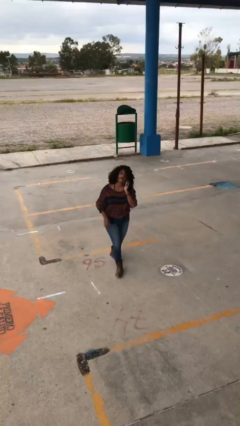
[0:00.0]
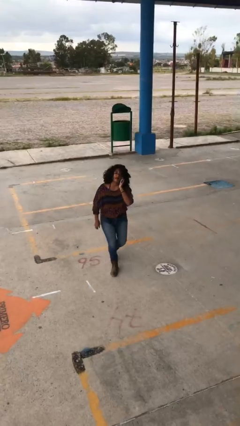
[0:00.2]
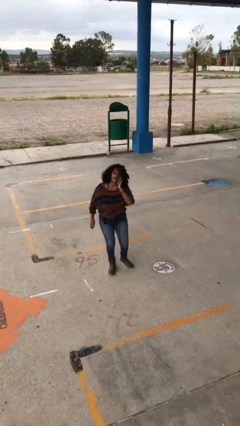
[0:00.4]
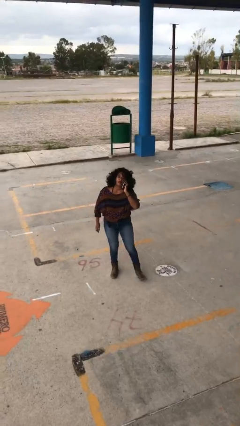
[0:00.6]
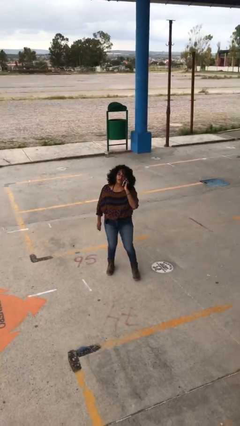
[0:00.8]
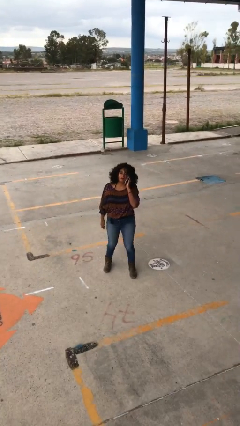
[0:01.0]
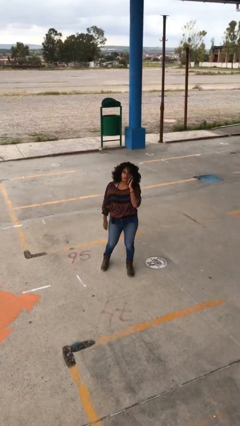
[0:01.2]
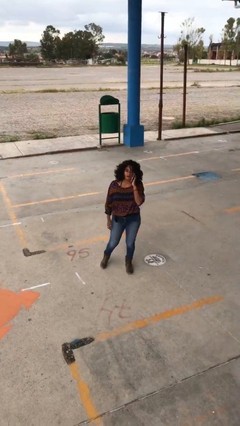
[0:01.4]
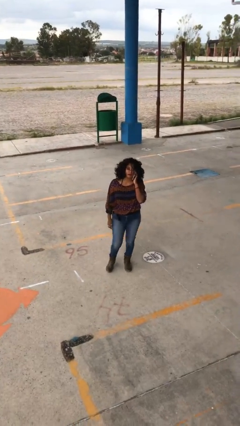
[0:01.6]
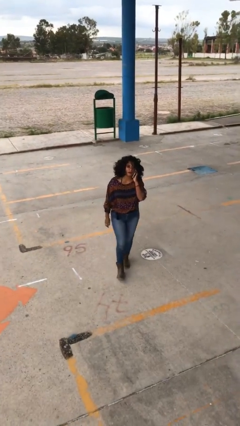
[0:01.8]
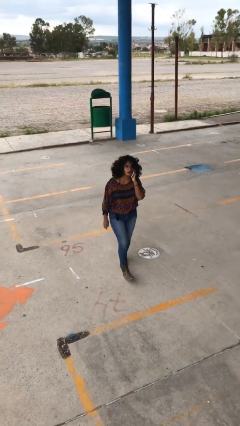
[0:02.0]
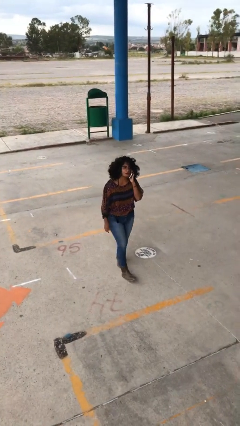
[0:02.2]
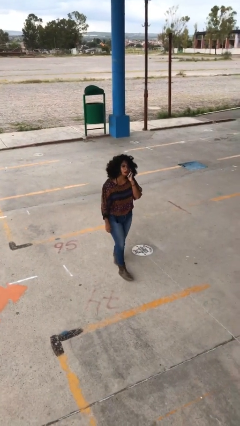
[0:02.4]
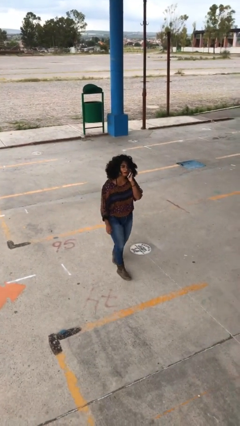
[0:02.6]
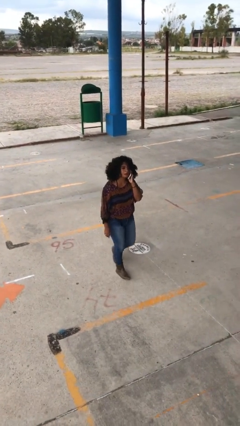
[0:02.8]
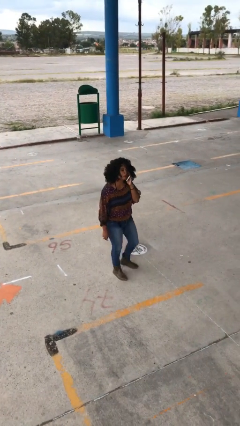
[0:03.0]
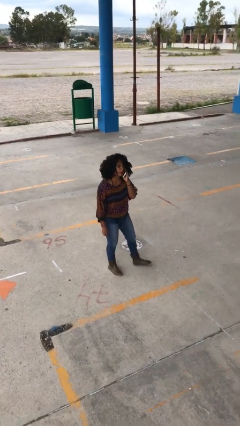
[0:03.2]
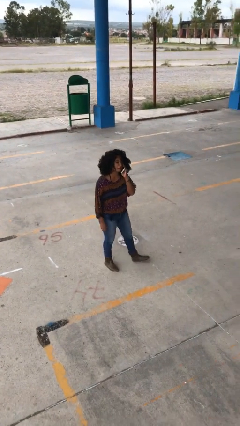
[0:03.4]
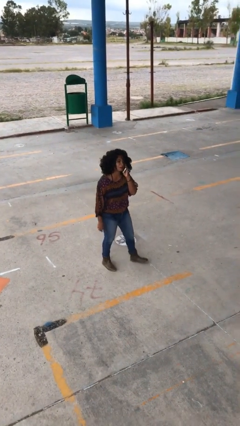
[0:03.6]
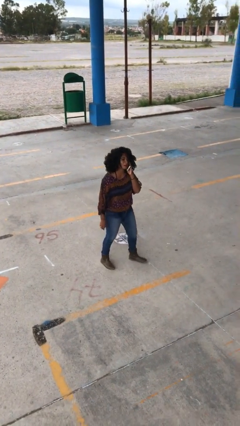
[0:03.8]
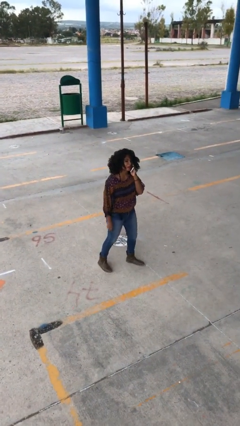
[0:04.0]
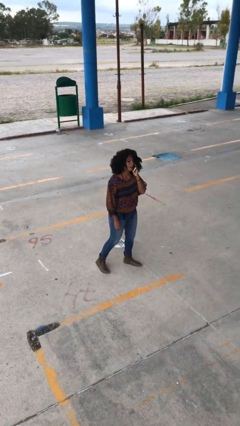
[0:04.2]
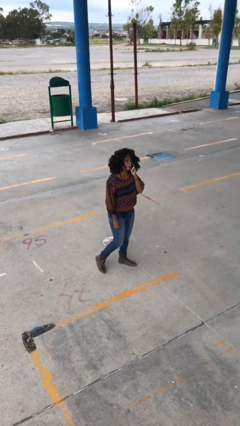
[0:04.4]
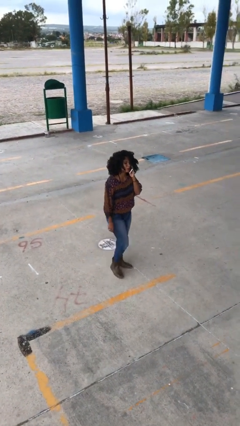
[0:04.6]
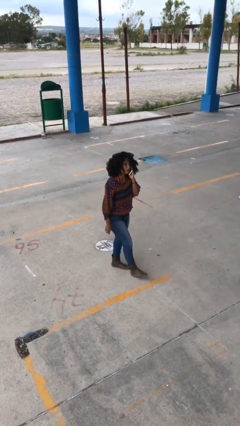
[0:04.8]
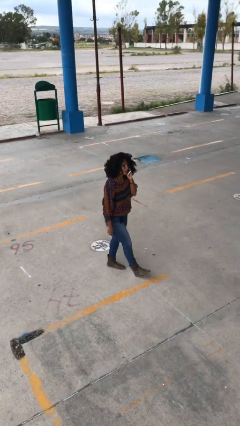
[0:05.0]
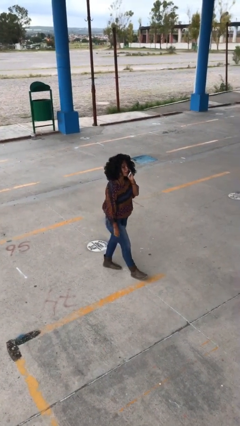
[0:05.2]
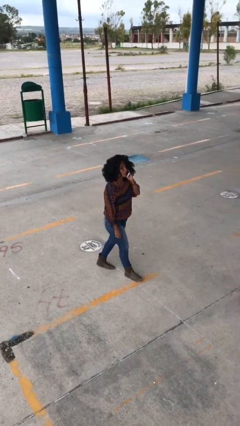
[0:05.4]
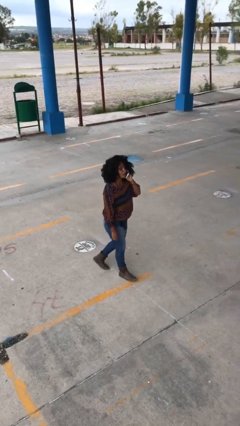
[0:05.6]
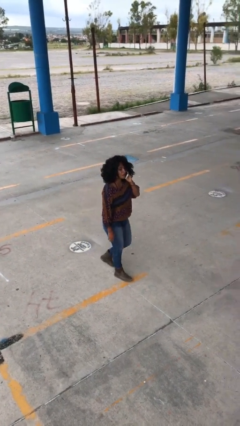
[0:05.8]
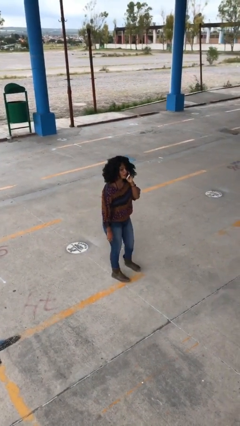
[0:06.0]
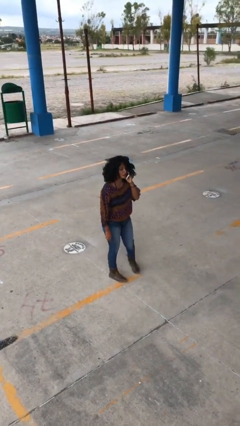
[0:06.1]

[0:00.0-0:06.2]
person talks on phone

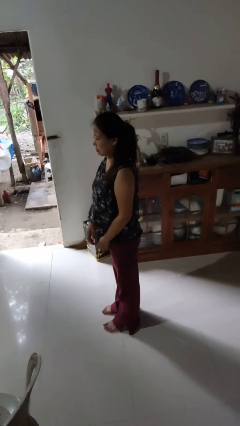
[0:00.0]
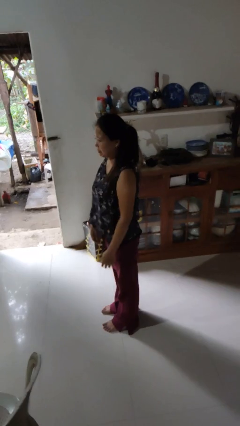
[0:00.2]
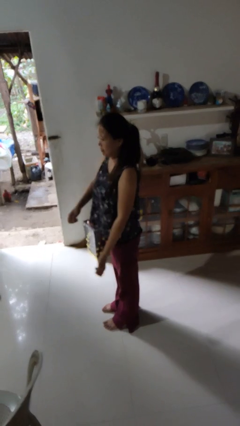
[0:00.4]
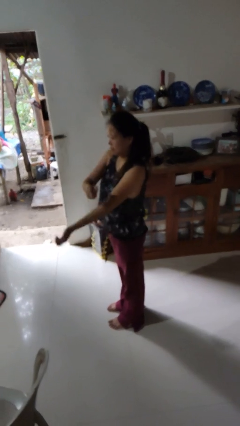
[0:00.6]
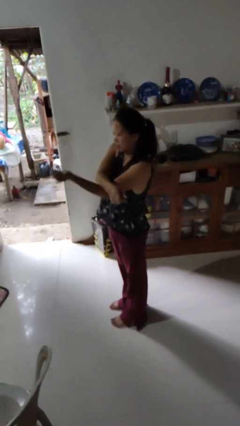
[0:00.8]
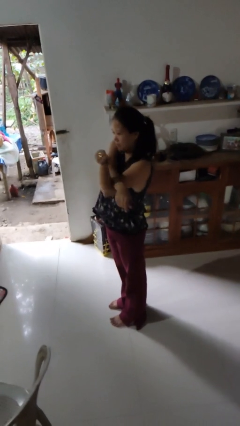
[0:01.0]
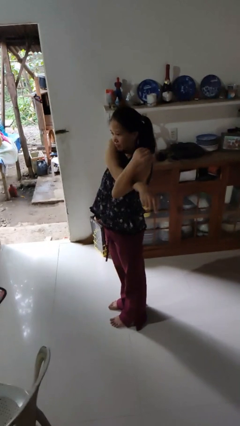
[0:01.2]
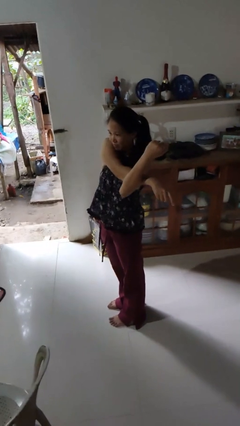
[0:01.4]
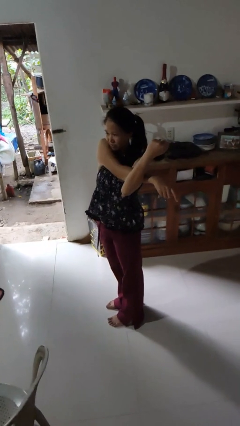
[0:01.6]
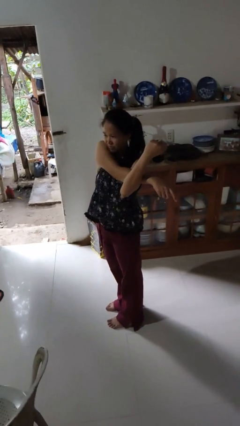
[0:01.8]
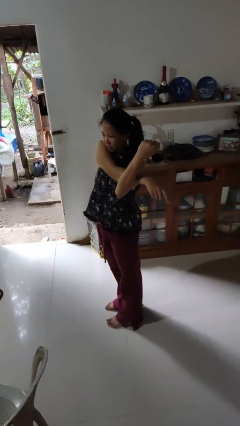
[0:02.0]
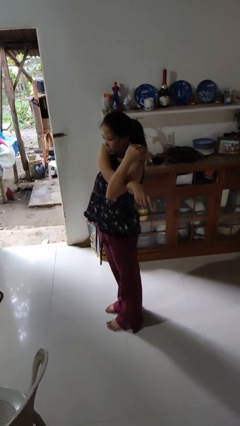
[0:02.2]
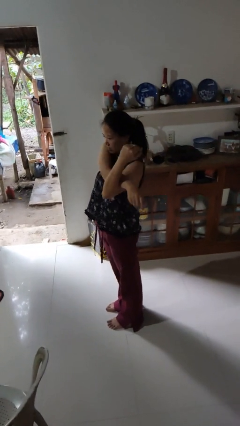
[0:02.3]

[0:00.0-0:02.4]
person stretches arms to side

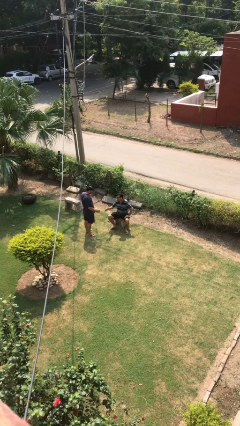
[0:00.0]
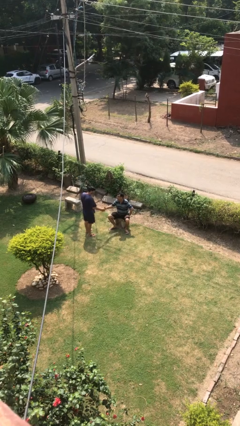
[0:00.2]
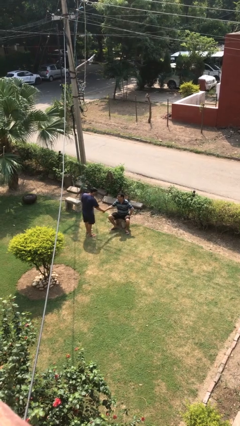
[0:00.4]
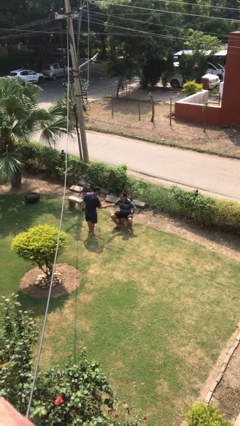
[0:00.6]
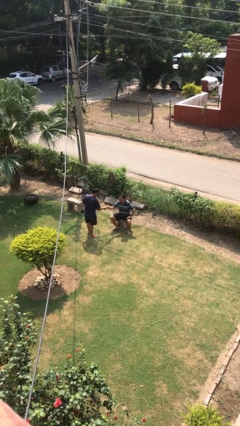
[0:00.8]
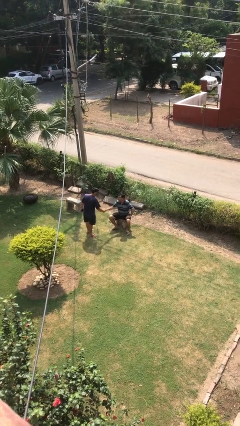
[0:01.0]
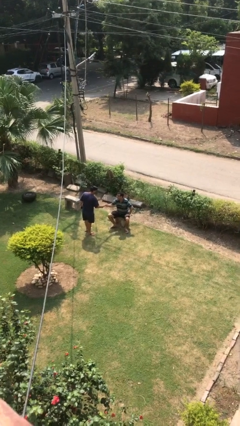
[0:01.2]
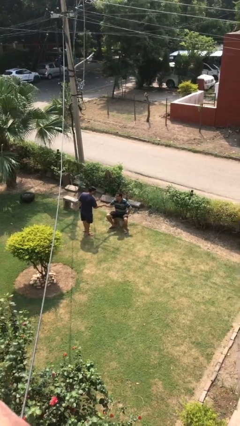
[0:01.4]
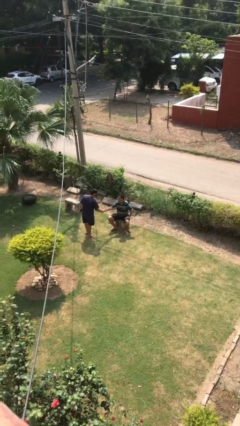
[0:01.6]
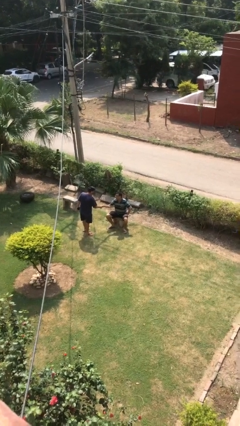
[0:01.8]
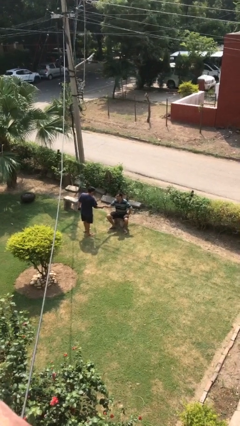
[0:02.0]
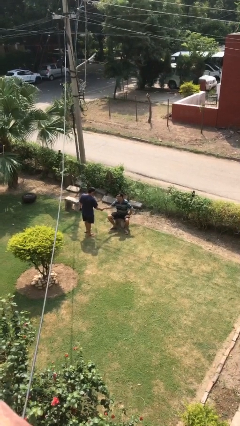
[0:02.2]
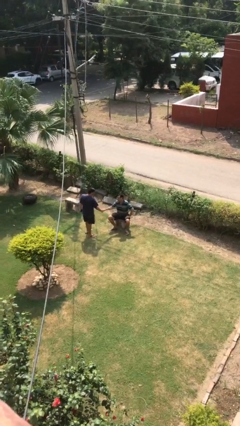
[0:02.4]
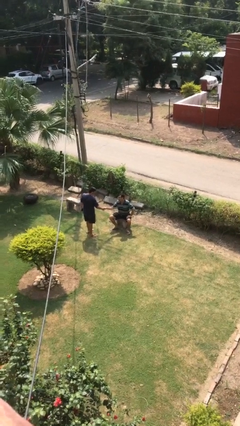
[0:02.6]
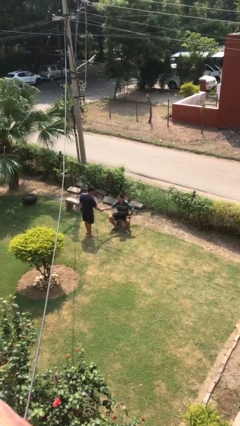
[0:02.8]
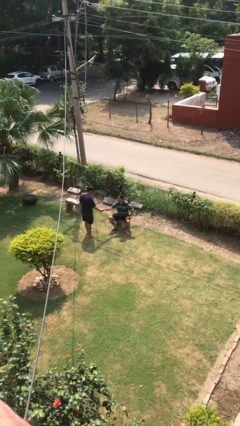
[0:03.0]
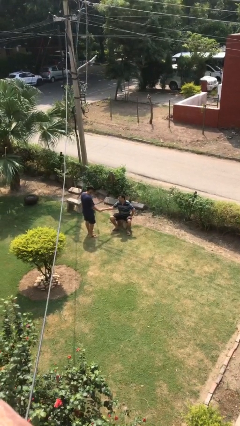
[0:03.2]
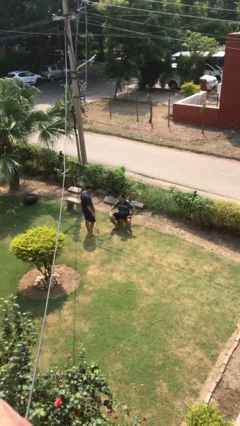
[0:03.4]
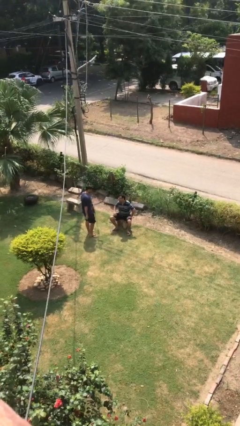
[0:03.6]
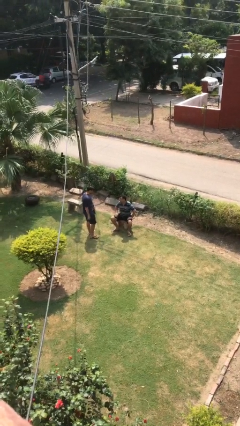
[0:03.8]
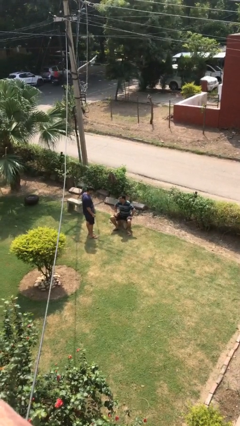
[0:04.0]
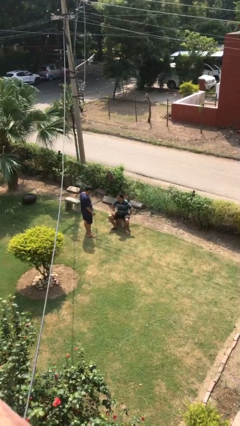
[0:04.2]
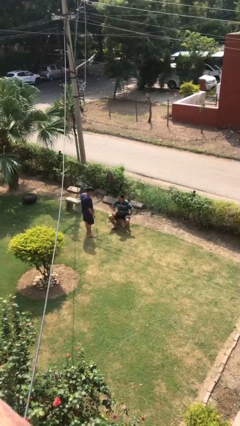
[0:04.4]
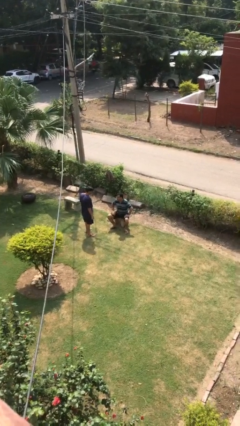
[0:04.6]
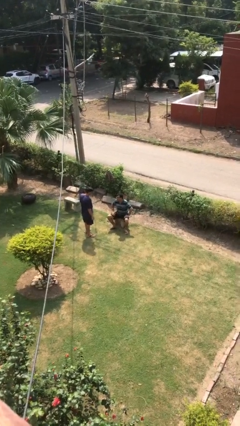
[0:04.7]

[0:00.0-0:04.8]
person shakes hand

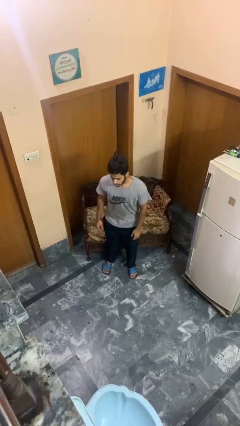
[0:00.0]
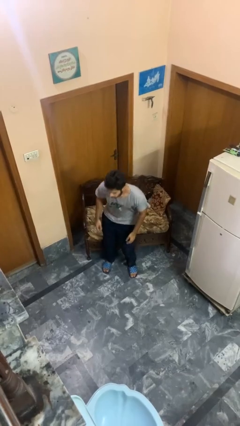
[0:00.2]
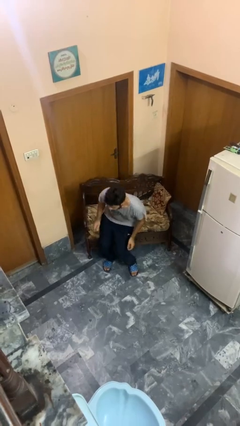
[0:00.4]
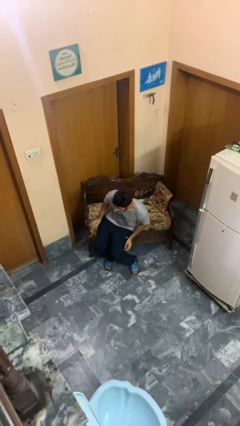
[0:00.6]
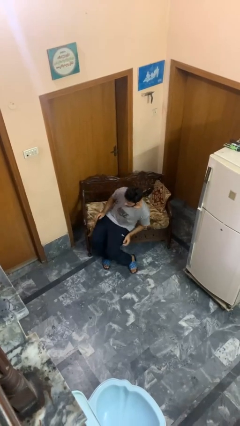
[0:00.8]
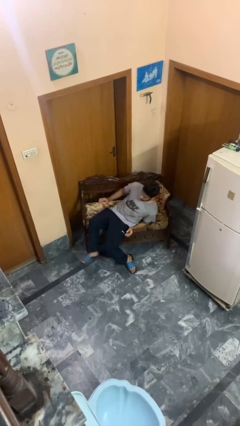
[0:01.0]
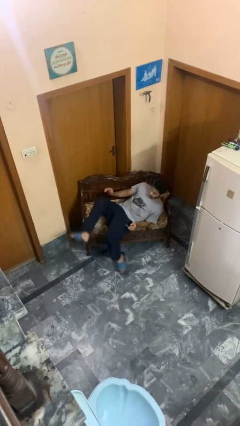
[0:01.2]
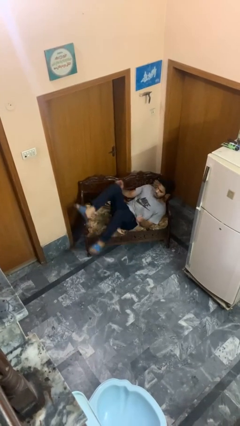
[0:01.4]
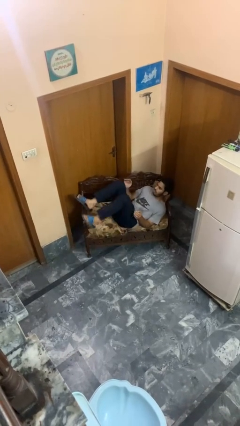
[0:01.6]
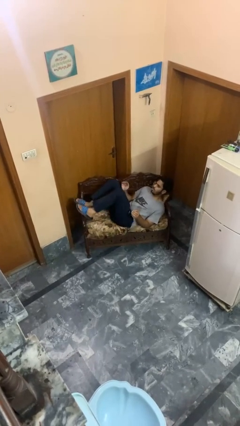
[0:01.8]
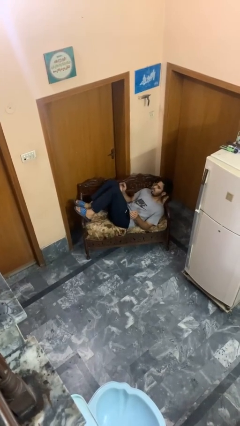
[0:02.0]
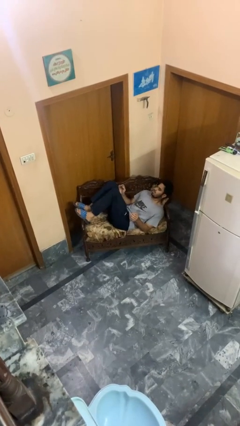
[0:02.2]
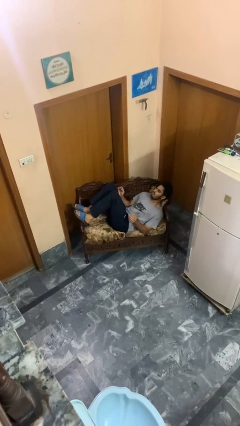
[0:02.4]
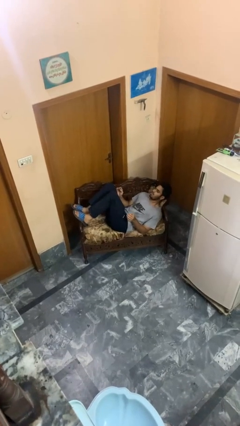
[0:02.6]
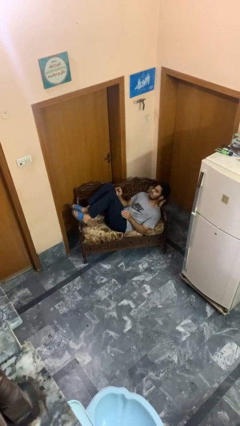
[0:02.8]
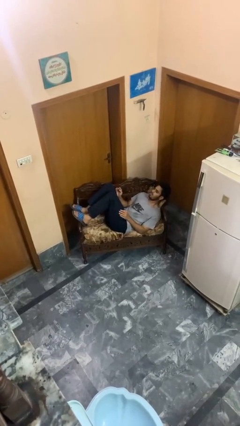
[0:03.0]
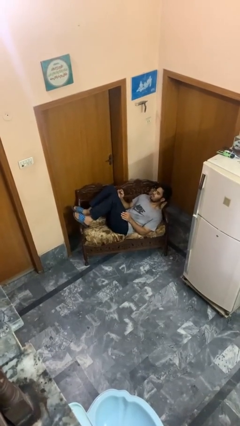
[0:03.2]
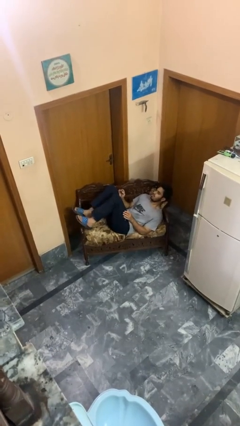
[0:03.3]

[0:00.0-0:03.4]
person lies down on couch

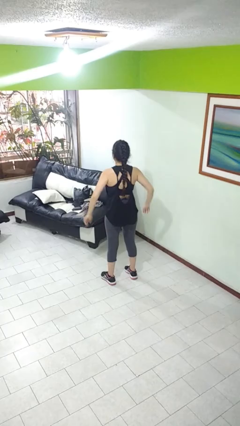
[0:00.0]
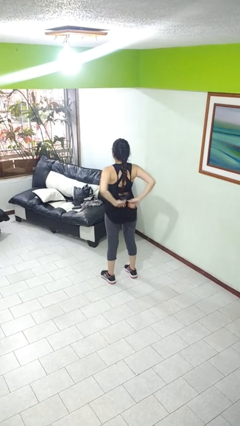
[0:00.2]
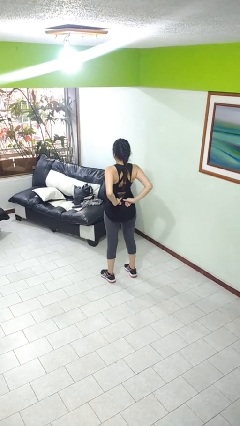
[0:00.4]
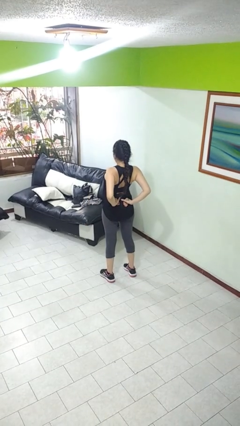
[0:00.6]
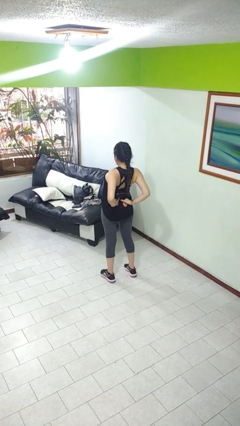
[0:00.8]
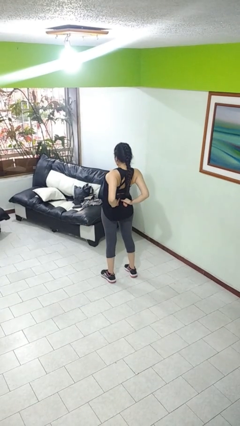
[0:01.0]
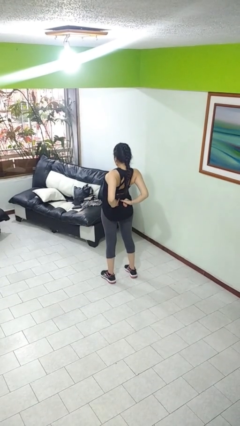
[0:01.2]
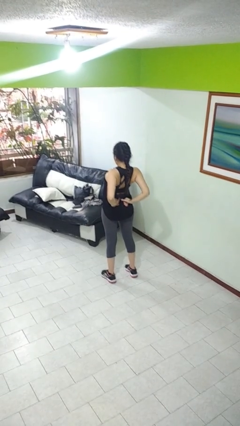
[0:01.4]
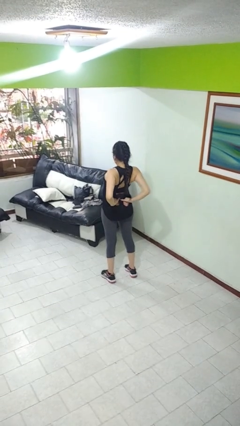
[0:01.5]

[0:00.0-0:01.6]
person stretches back
